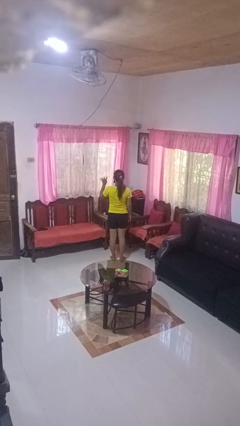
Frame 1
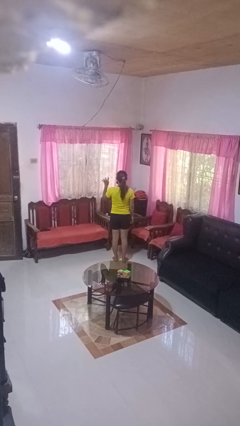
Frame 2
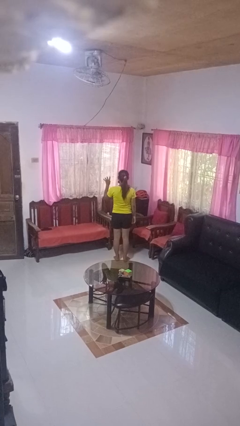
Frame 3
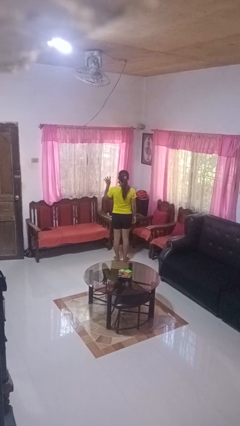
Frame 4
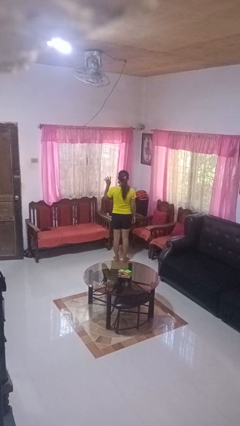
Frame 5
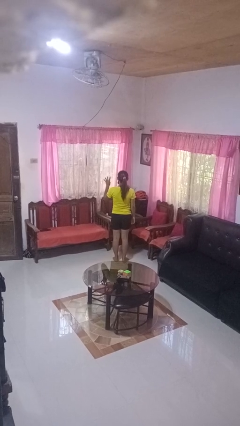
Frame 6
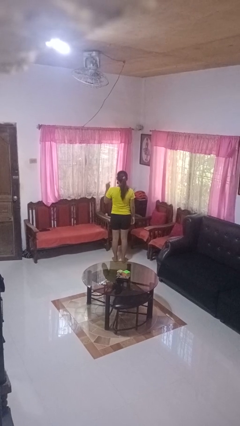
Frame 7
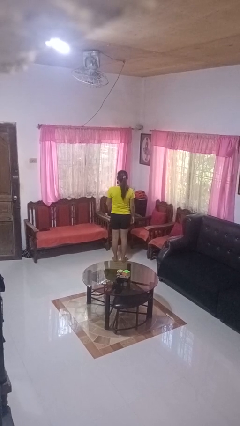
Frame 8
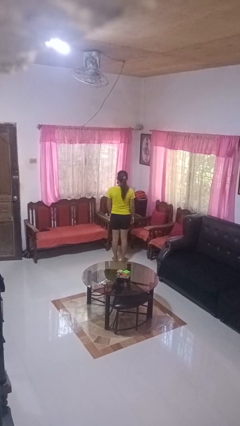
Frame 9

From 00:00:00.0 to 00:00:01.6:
person gestures number four

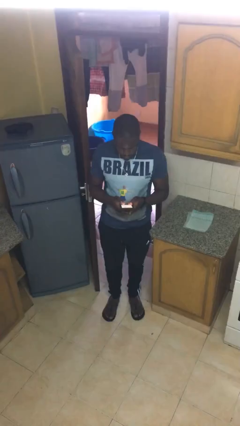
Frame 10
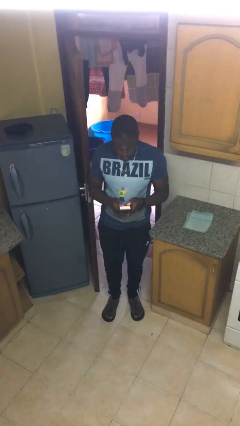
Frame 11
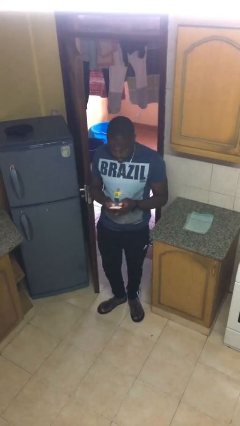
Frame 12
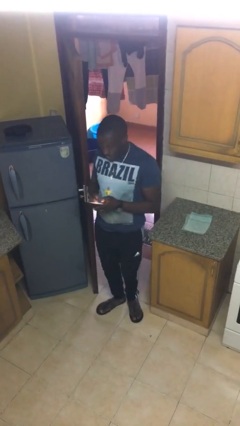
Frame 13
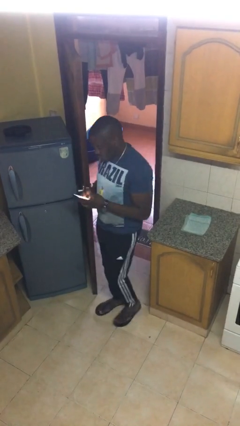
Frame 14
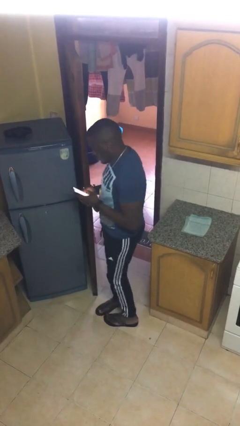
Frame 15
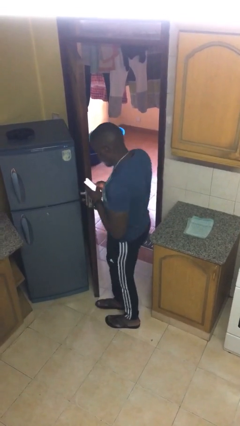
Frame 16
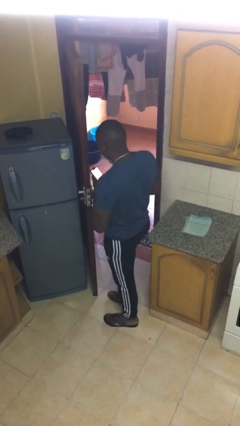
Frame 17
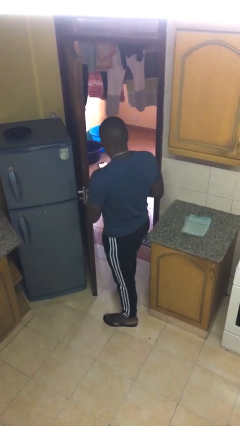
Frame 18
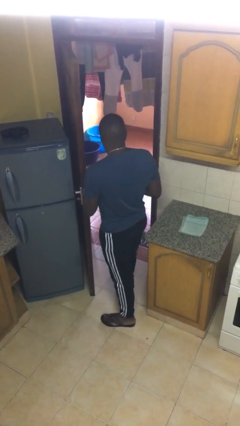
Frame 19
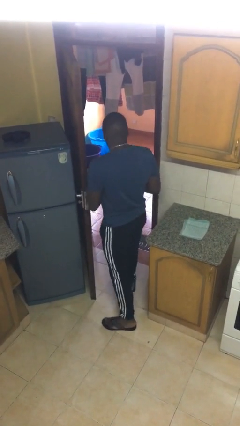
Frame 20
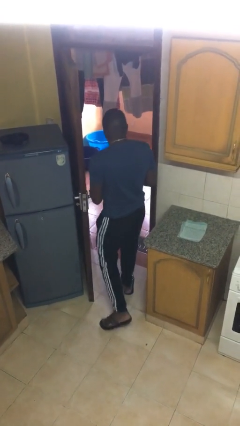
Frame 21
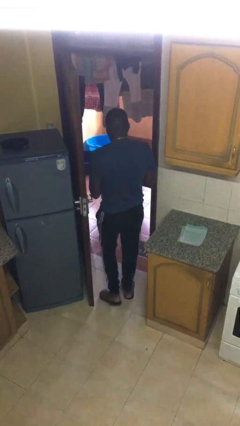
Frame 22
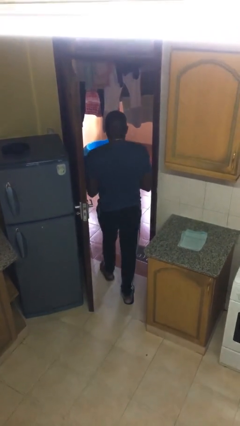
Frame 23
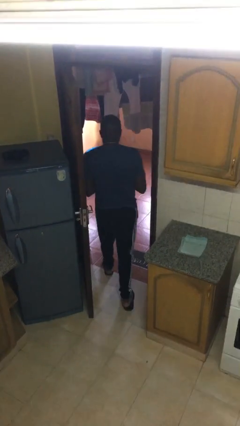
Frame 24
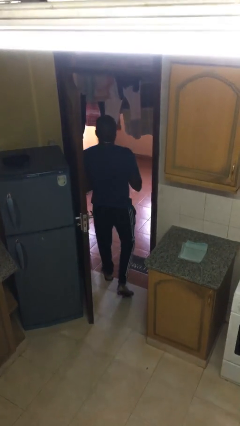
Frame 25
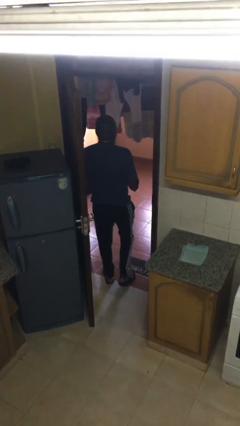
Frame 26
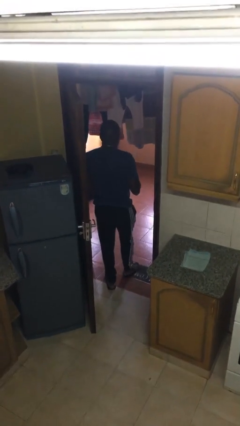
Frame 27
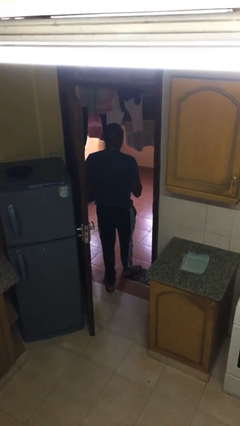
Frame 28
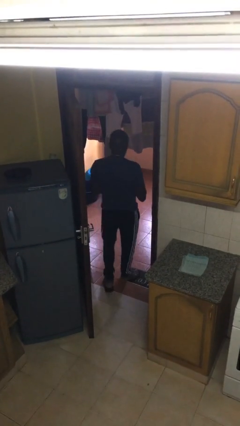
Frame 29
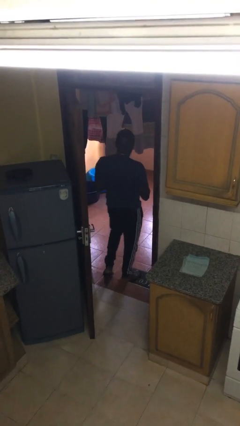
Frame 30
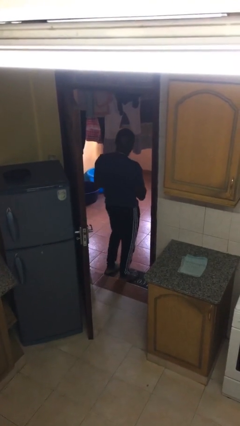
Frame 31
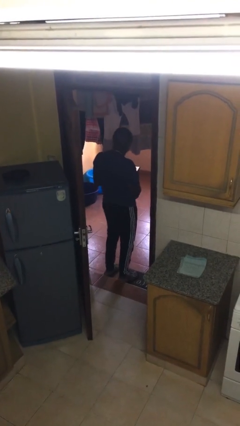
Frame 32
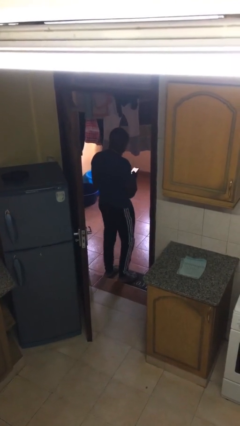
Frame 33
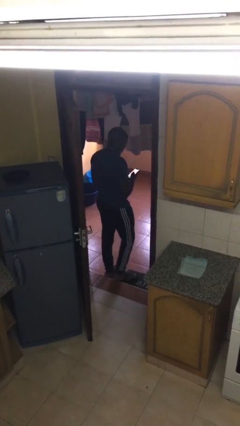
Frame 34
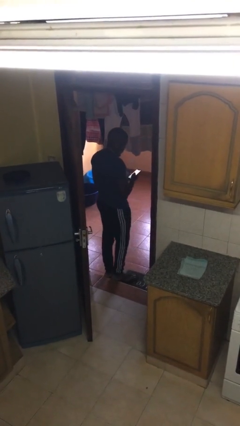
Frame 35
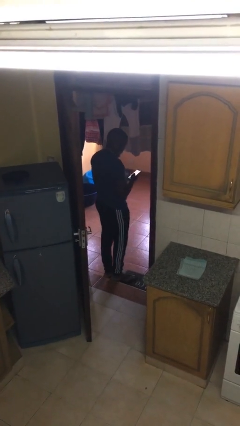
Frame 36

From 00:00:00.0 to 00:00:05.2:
person exits scene through structure

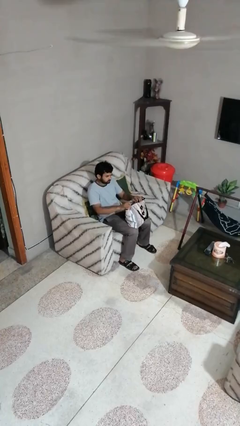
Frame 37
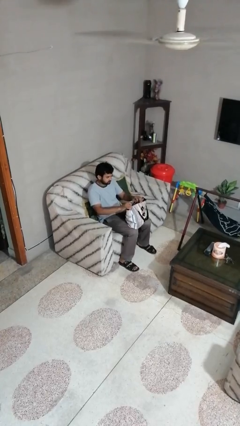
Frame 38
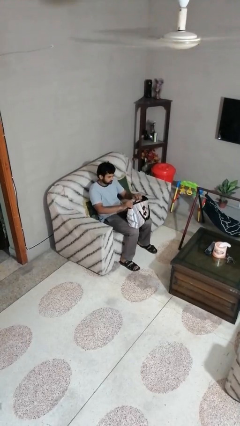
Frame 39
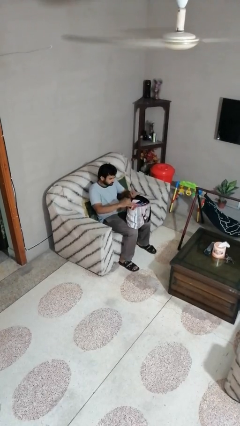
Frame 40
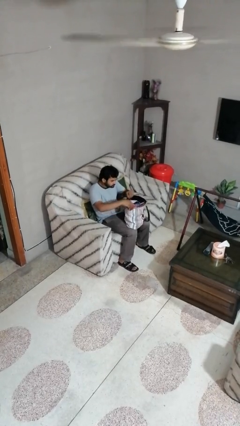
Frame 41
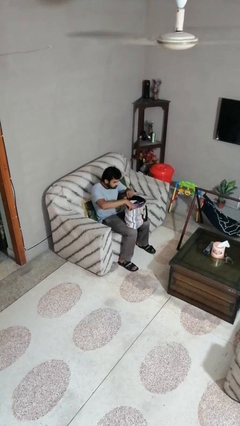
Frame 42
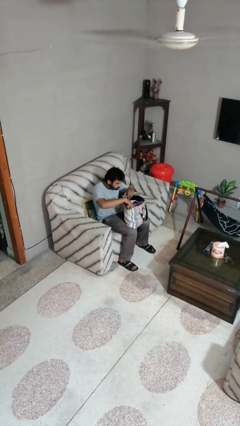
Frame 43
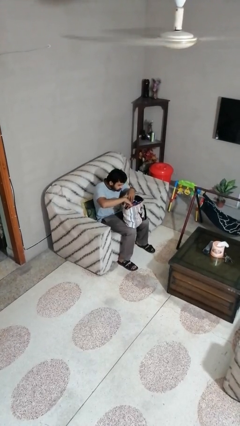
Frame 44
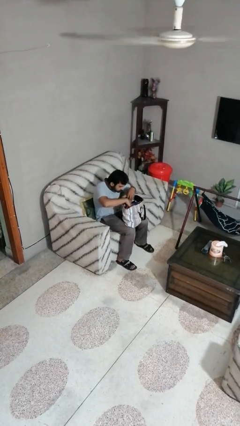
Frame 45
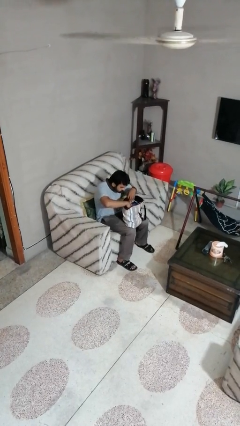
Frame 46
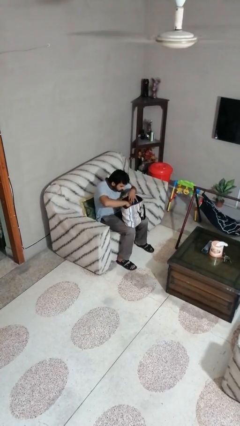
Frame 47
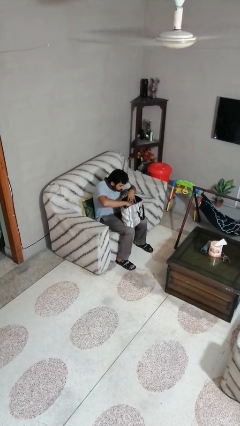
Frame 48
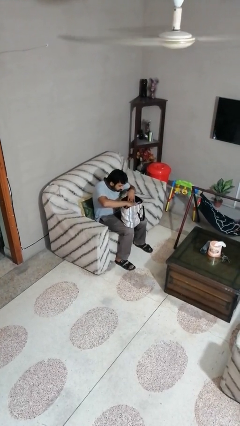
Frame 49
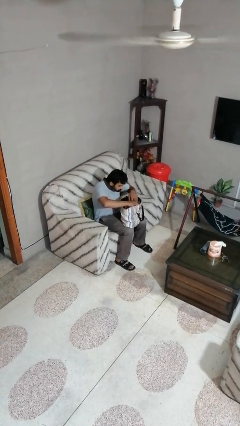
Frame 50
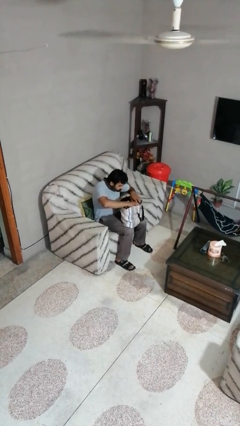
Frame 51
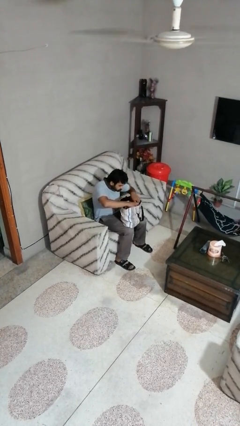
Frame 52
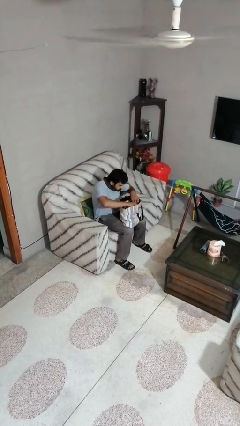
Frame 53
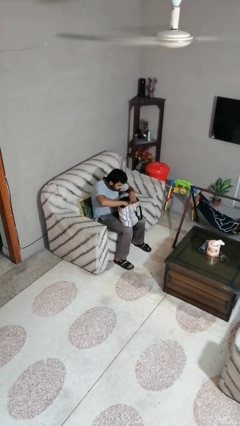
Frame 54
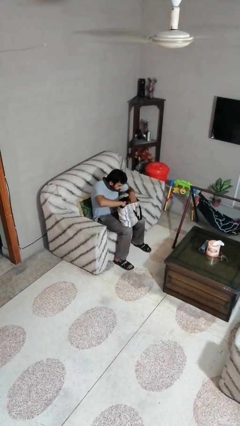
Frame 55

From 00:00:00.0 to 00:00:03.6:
person searches in backpack

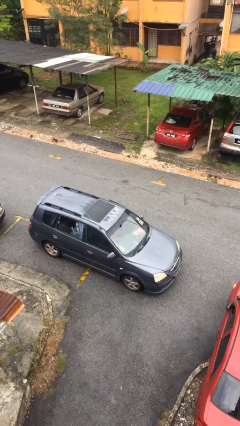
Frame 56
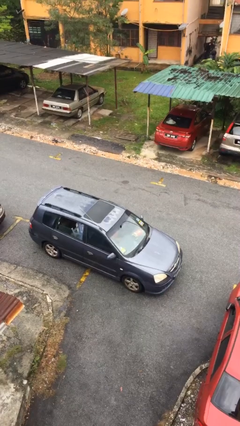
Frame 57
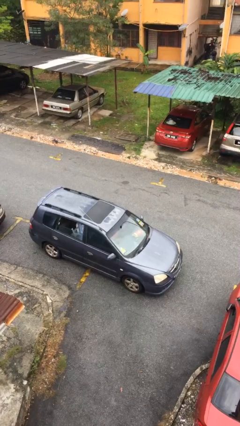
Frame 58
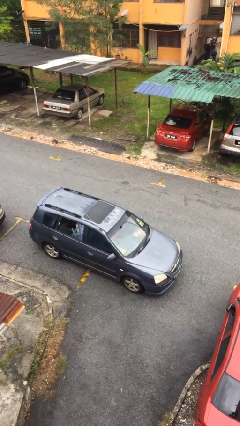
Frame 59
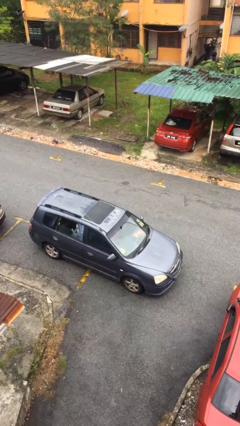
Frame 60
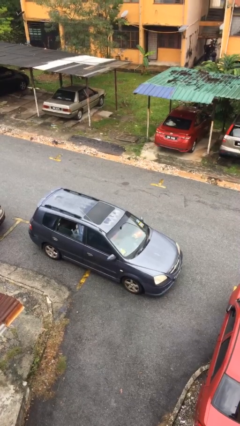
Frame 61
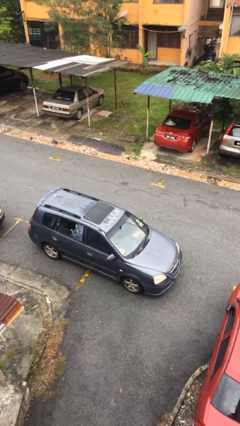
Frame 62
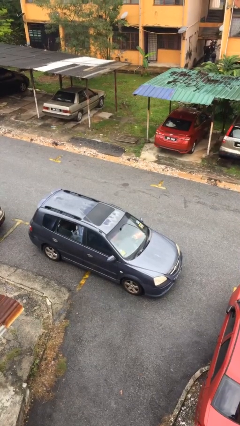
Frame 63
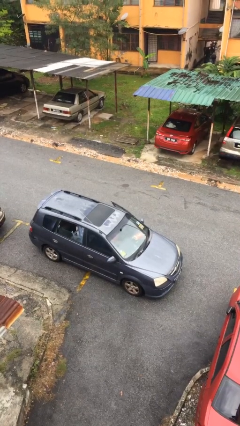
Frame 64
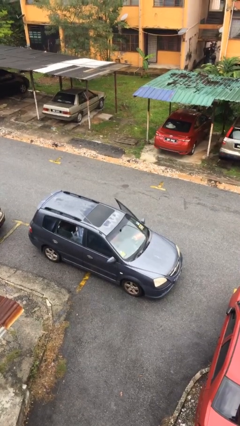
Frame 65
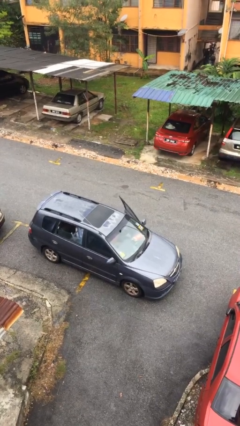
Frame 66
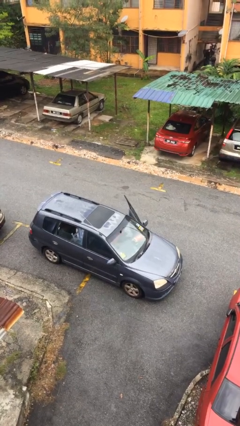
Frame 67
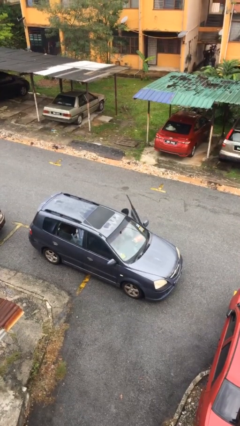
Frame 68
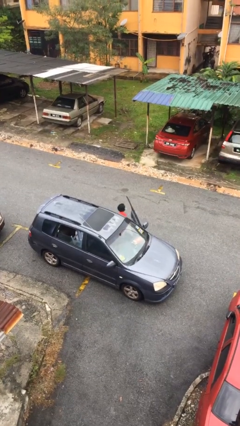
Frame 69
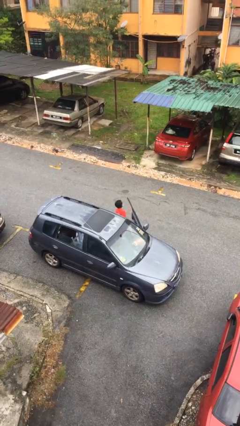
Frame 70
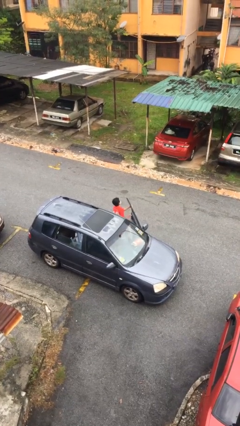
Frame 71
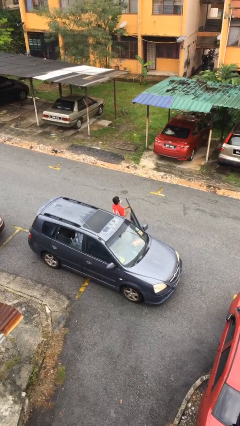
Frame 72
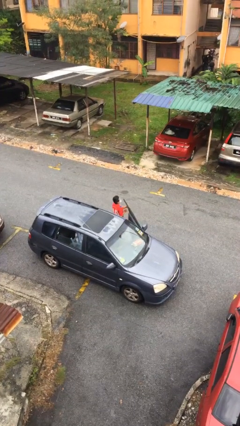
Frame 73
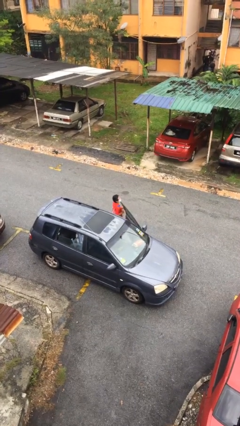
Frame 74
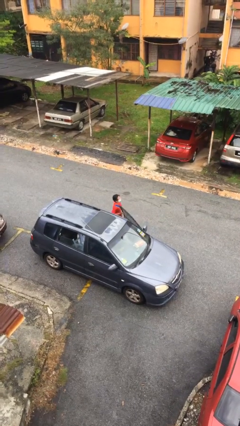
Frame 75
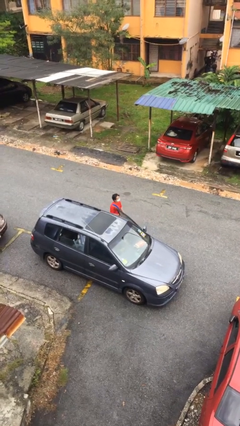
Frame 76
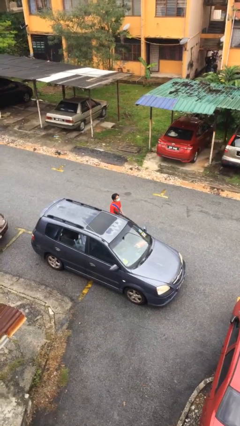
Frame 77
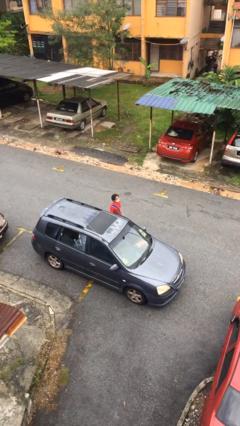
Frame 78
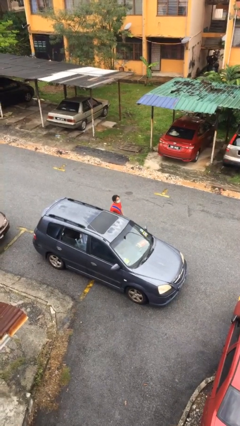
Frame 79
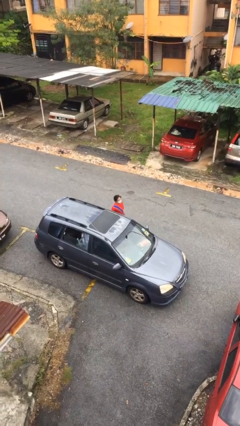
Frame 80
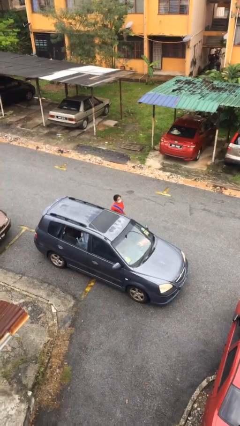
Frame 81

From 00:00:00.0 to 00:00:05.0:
person exits car

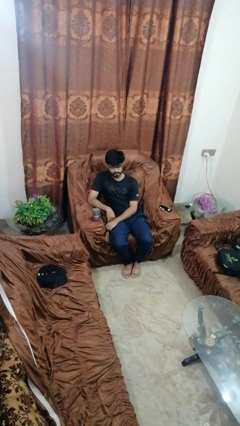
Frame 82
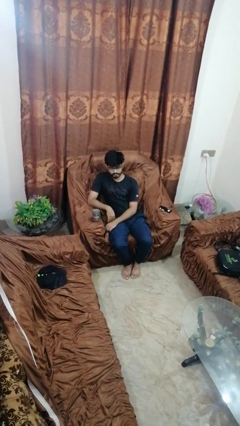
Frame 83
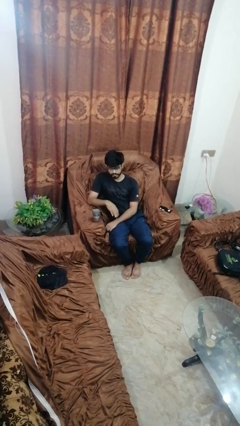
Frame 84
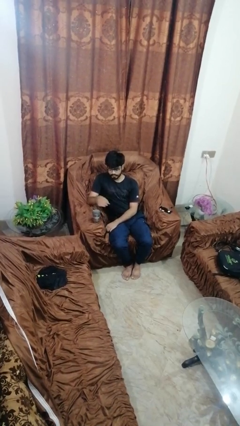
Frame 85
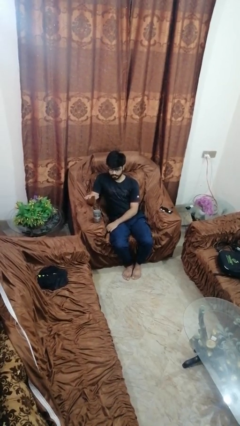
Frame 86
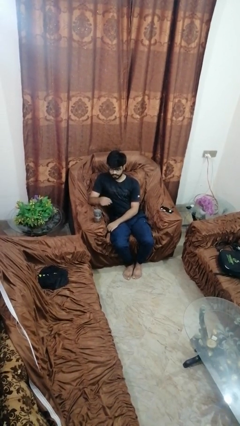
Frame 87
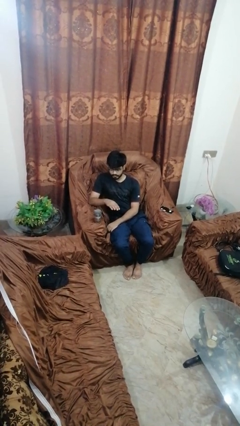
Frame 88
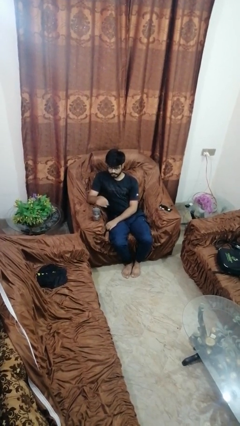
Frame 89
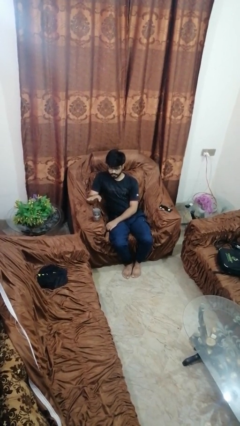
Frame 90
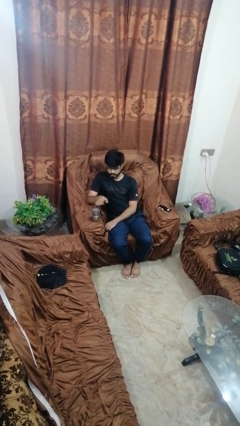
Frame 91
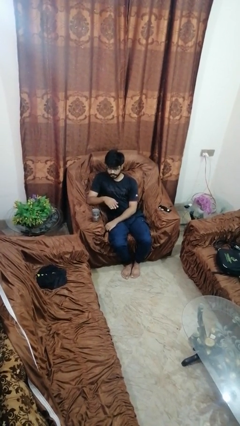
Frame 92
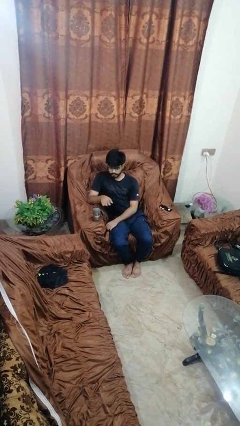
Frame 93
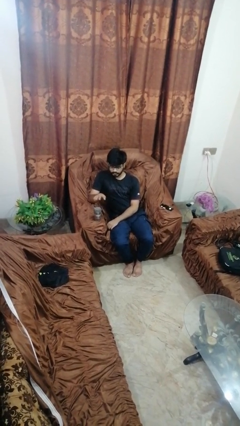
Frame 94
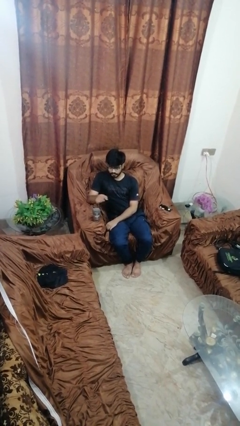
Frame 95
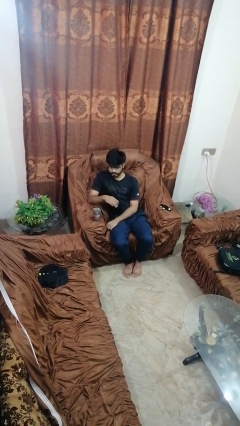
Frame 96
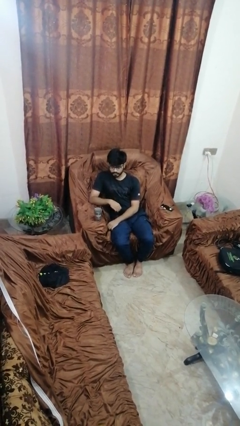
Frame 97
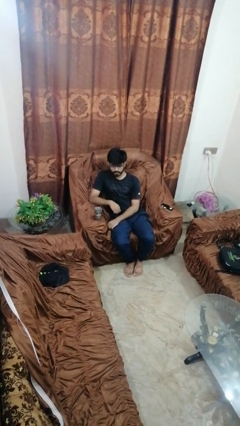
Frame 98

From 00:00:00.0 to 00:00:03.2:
person waves hand over object
